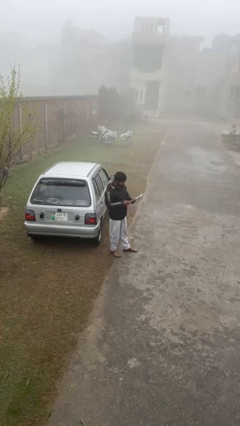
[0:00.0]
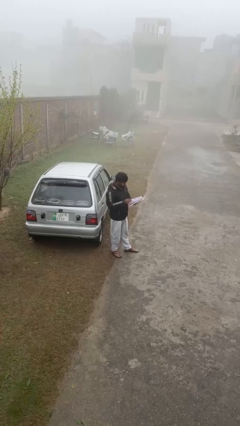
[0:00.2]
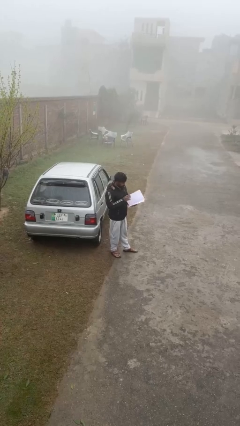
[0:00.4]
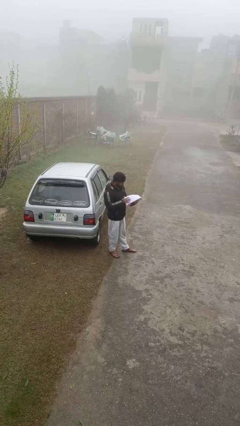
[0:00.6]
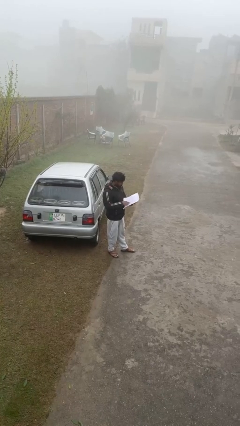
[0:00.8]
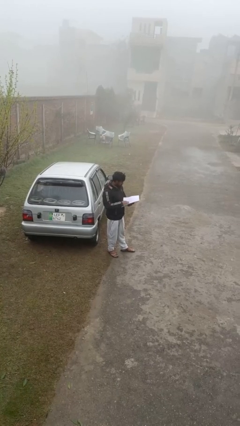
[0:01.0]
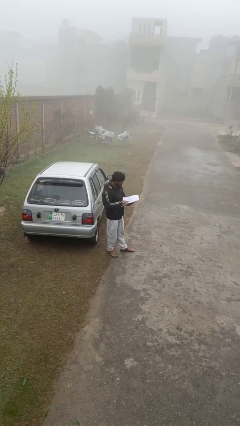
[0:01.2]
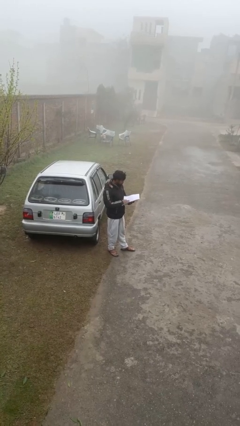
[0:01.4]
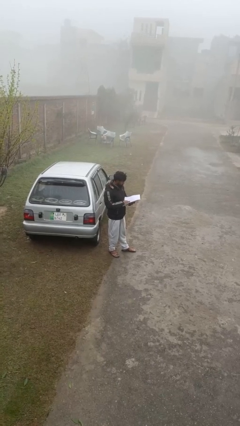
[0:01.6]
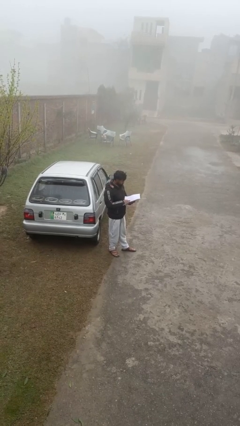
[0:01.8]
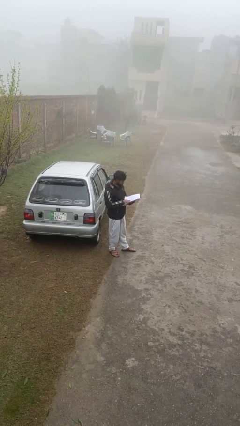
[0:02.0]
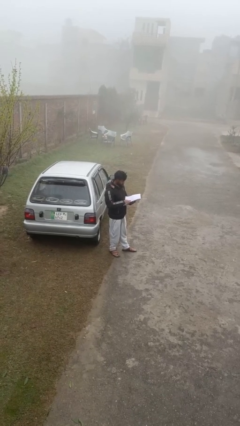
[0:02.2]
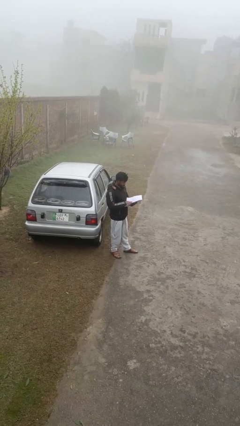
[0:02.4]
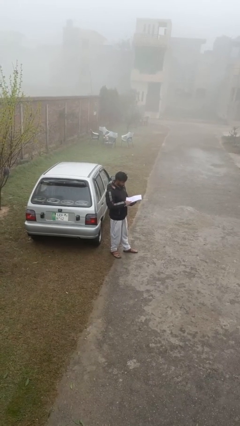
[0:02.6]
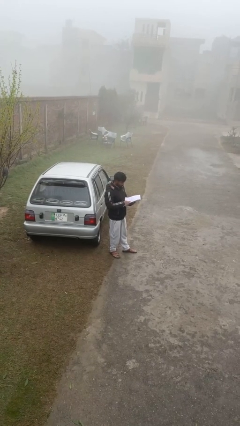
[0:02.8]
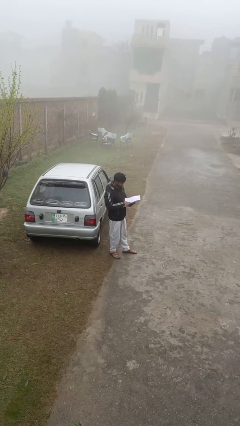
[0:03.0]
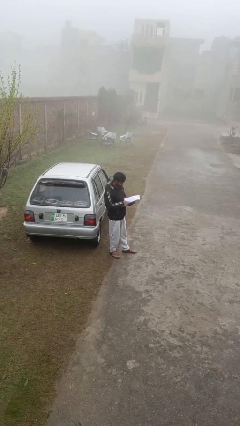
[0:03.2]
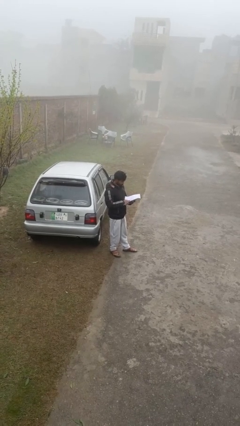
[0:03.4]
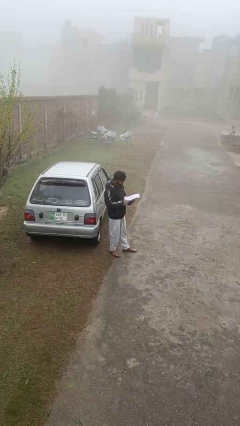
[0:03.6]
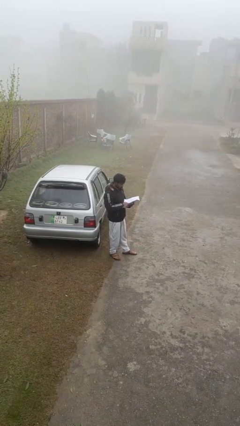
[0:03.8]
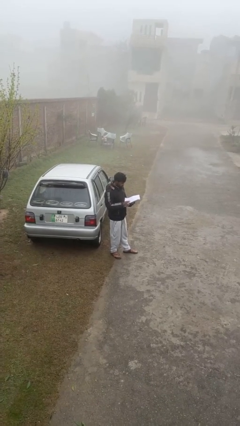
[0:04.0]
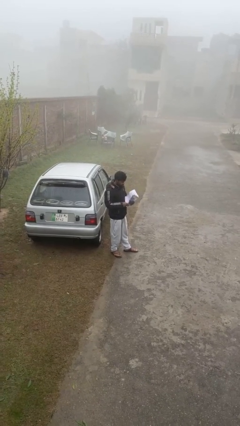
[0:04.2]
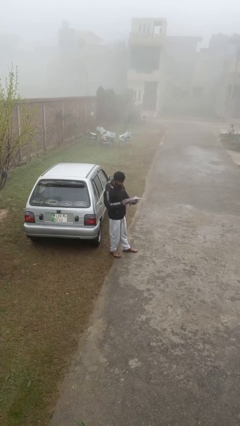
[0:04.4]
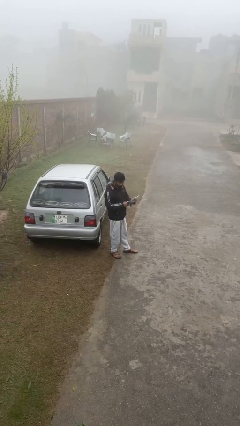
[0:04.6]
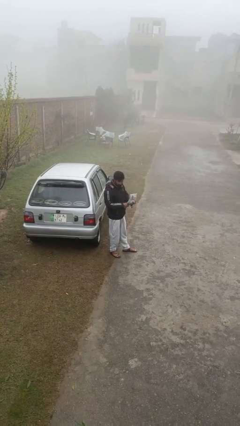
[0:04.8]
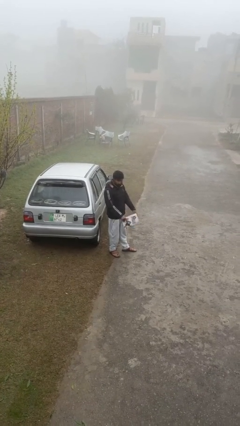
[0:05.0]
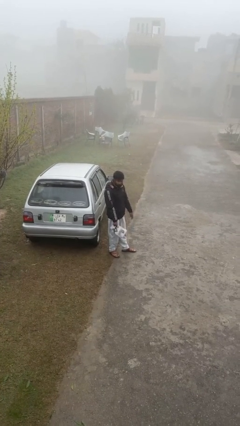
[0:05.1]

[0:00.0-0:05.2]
person reads document

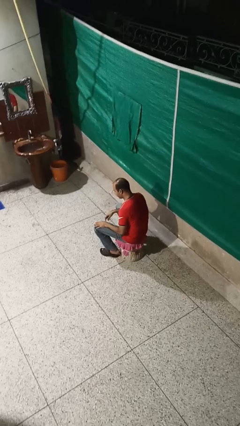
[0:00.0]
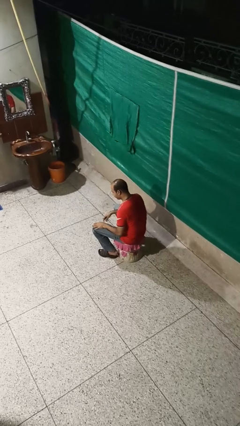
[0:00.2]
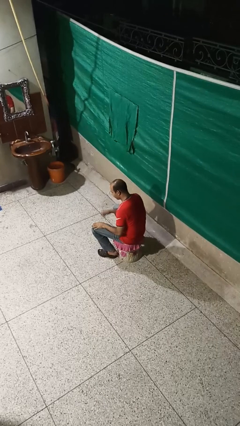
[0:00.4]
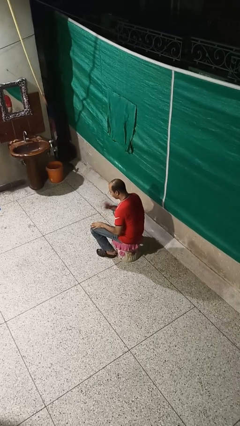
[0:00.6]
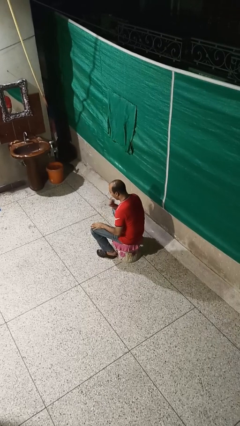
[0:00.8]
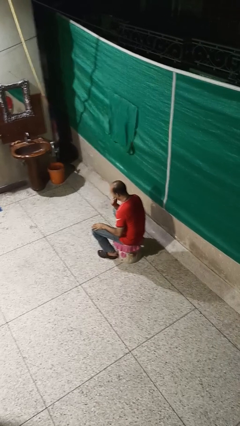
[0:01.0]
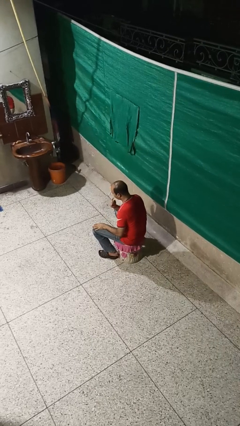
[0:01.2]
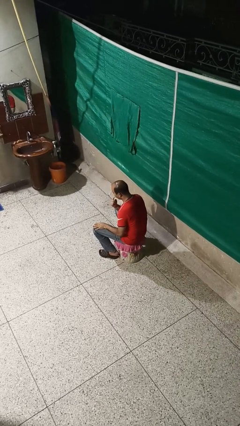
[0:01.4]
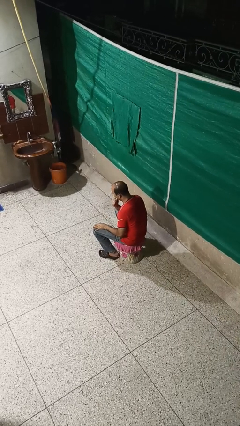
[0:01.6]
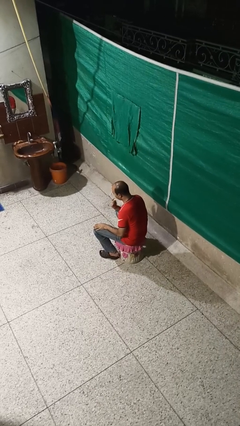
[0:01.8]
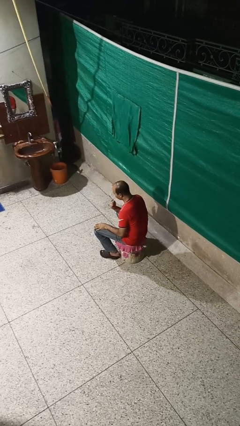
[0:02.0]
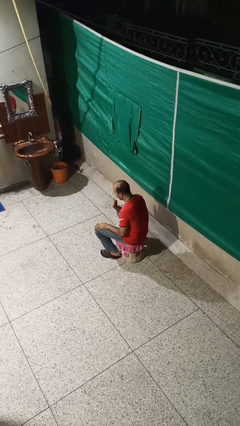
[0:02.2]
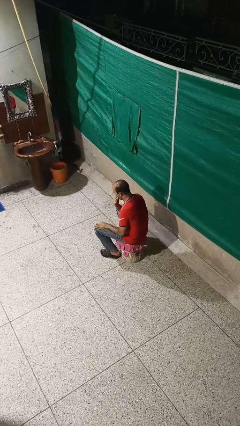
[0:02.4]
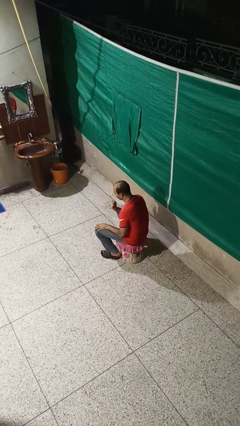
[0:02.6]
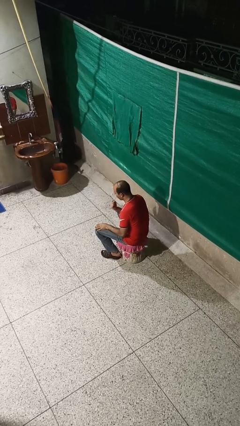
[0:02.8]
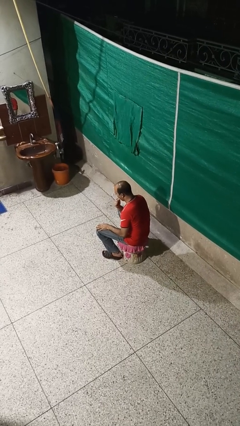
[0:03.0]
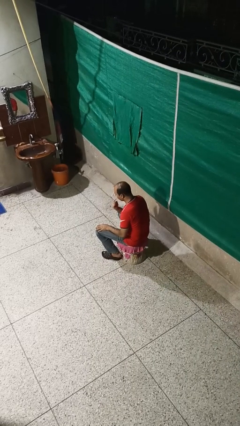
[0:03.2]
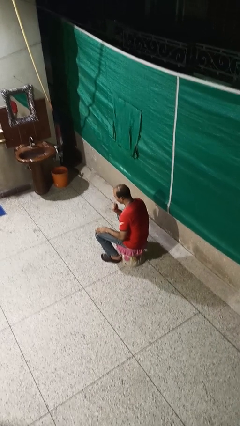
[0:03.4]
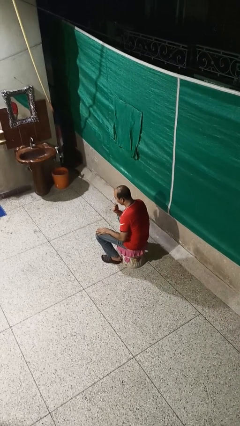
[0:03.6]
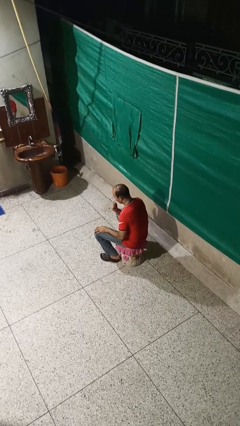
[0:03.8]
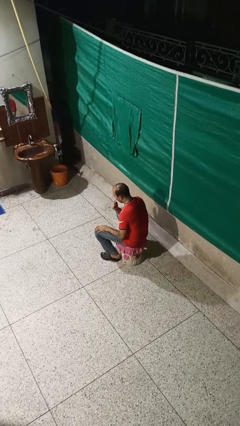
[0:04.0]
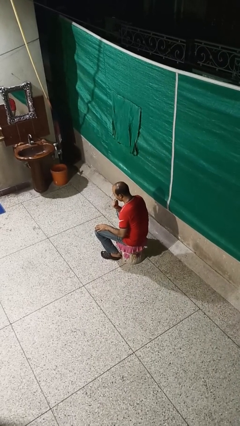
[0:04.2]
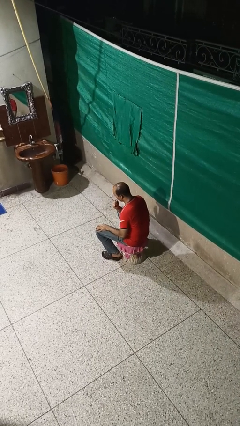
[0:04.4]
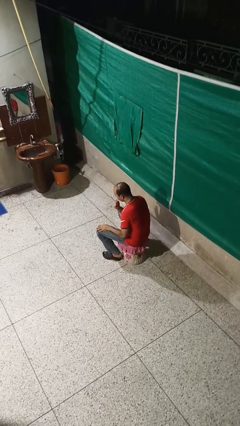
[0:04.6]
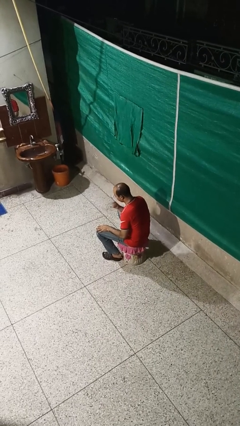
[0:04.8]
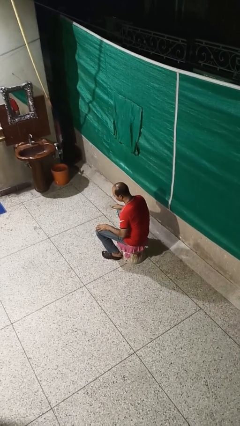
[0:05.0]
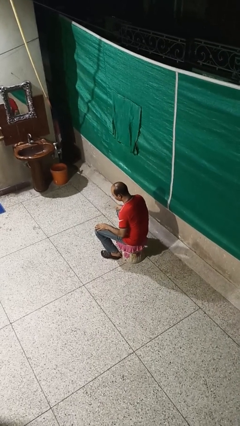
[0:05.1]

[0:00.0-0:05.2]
person licks fingers

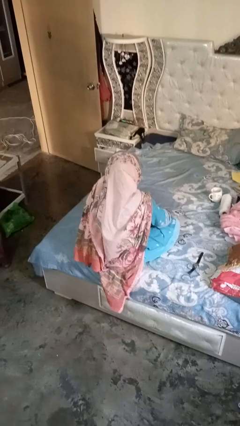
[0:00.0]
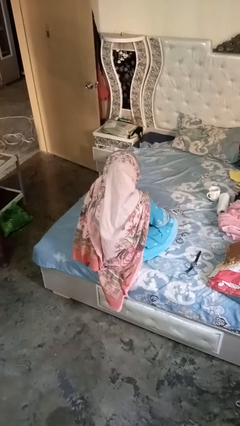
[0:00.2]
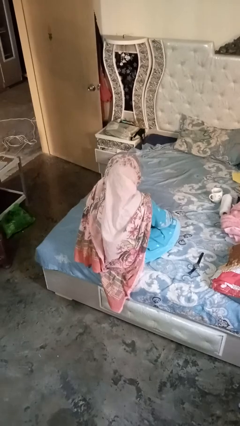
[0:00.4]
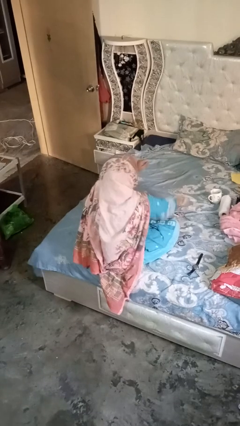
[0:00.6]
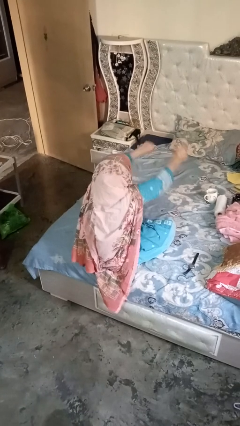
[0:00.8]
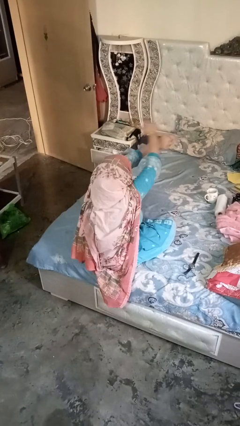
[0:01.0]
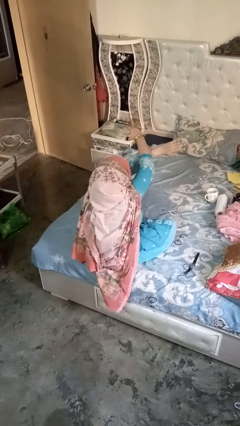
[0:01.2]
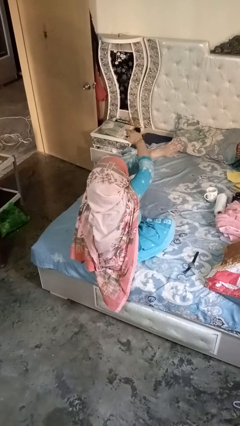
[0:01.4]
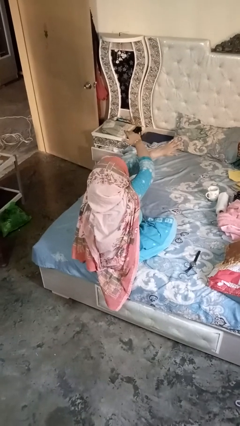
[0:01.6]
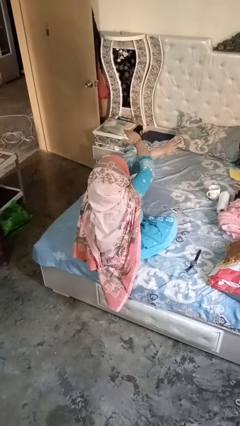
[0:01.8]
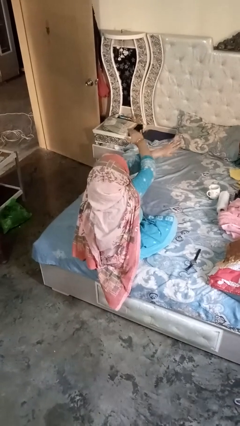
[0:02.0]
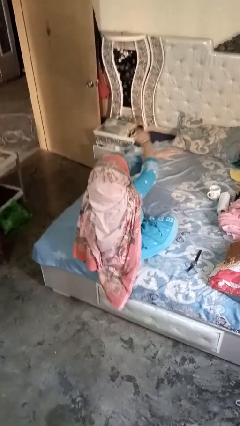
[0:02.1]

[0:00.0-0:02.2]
person gestures arms x

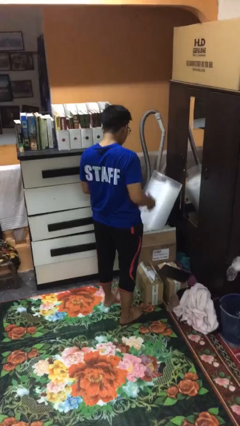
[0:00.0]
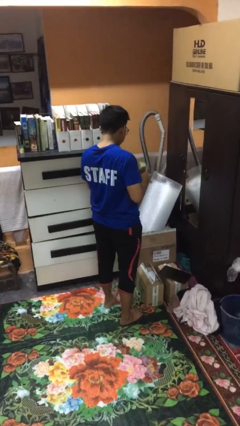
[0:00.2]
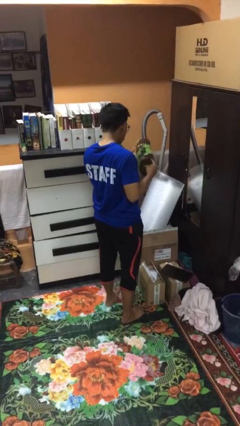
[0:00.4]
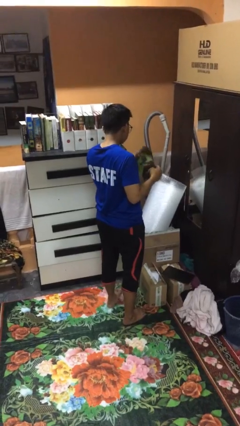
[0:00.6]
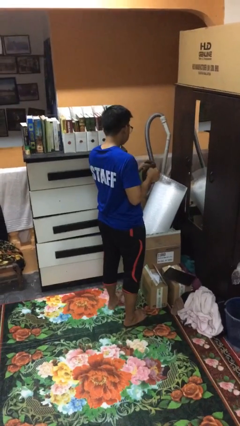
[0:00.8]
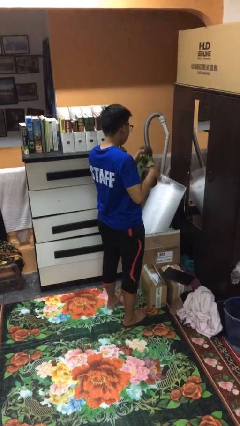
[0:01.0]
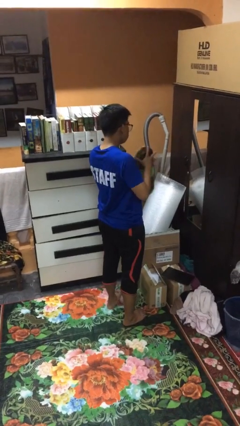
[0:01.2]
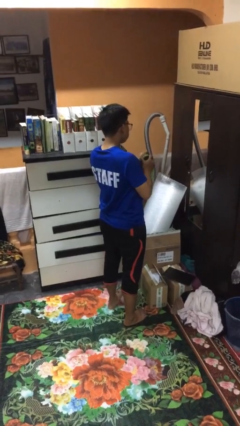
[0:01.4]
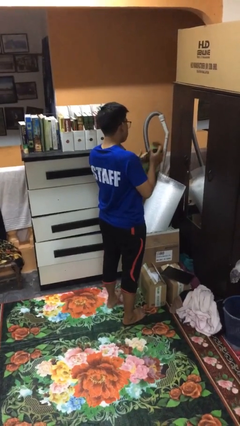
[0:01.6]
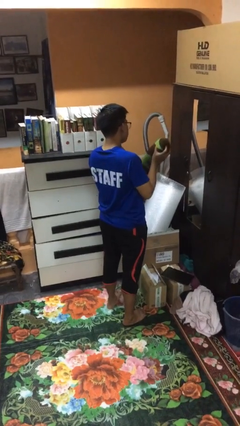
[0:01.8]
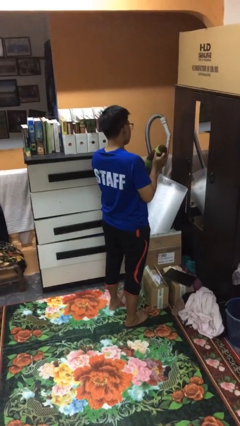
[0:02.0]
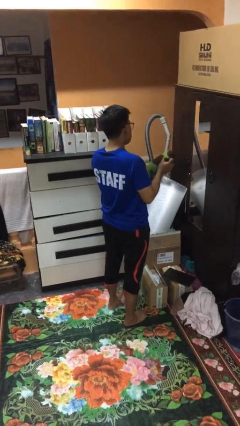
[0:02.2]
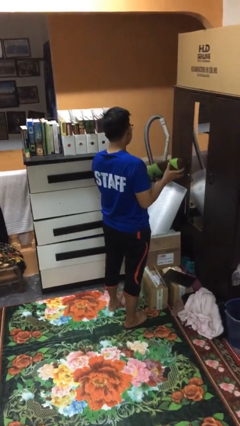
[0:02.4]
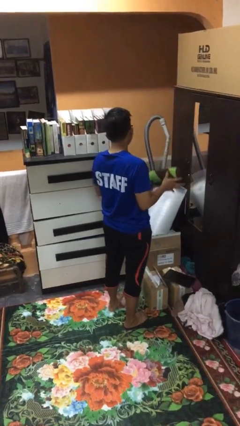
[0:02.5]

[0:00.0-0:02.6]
person squeezes object

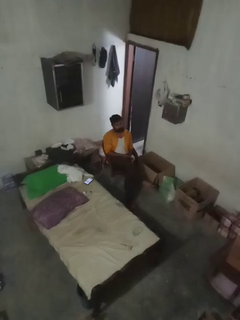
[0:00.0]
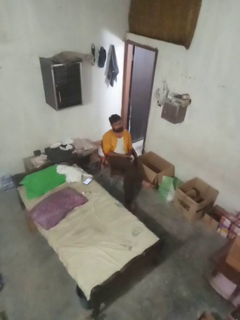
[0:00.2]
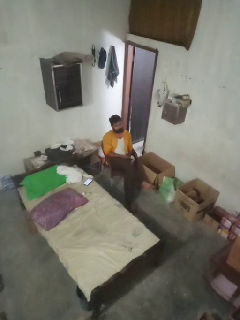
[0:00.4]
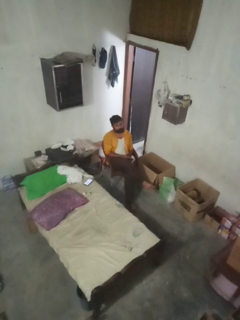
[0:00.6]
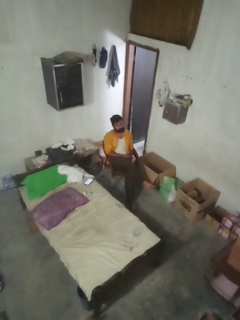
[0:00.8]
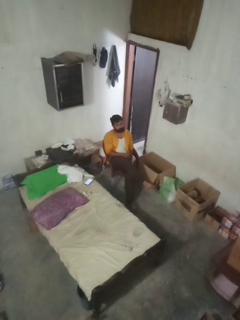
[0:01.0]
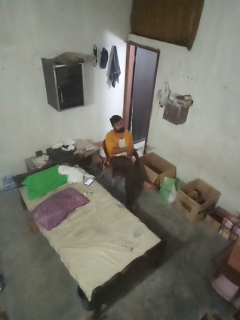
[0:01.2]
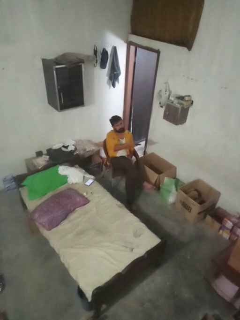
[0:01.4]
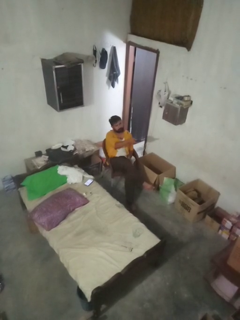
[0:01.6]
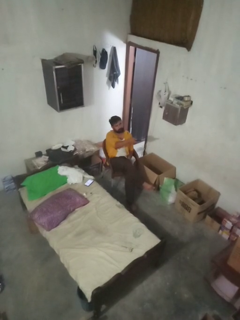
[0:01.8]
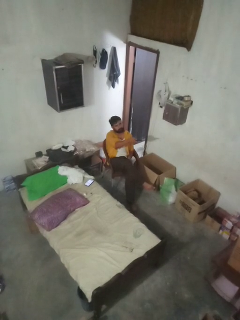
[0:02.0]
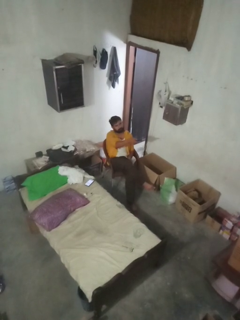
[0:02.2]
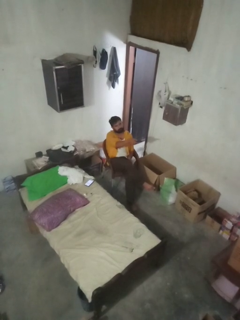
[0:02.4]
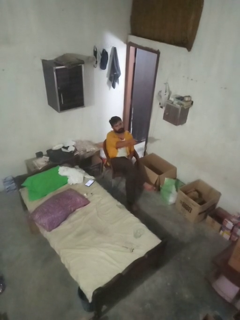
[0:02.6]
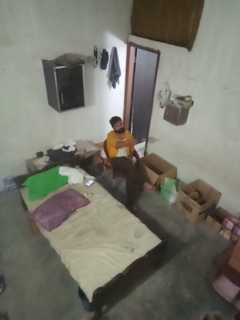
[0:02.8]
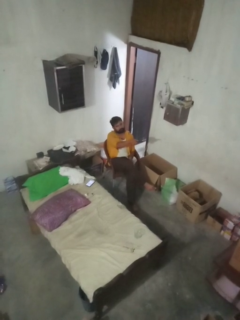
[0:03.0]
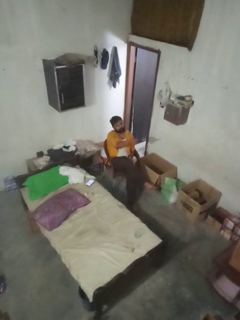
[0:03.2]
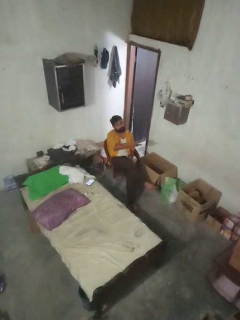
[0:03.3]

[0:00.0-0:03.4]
person uses television remote
